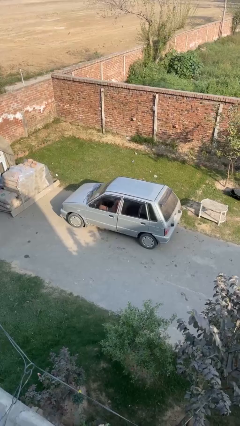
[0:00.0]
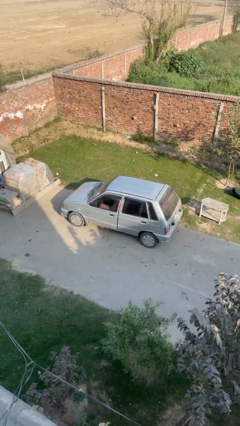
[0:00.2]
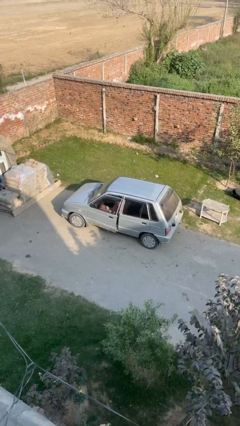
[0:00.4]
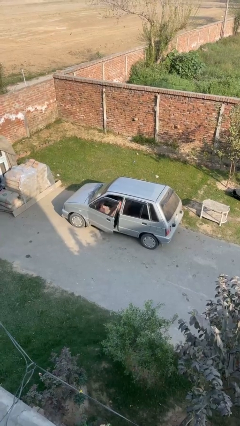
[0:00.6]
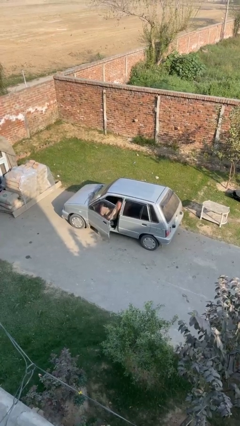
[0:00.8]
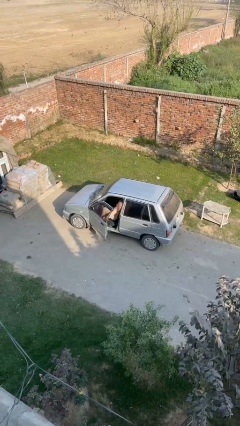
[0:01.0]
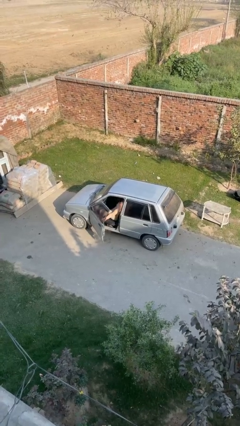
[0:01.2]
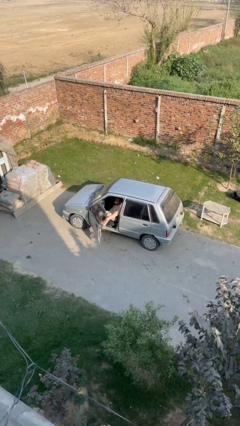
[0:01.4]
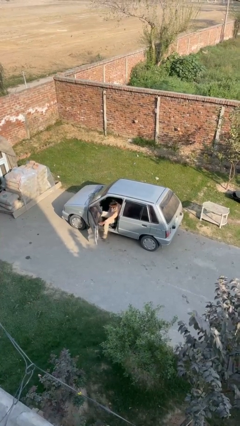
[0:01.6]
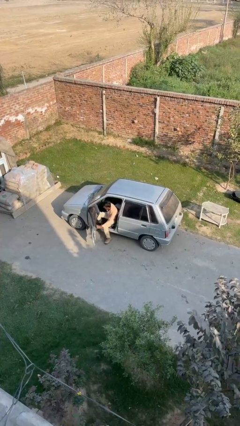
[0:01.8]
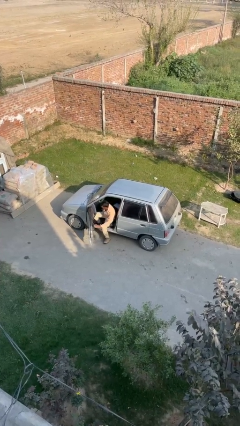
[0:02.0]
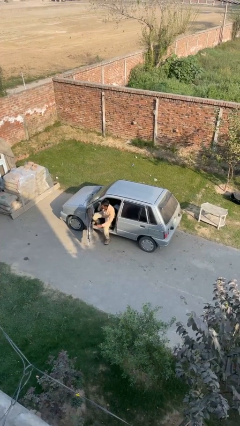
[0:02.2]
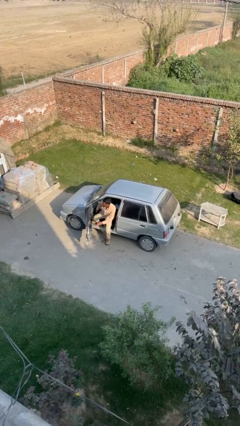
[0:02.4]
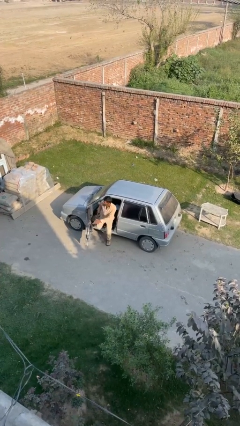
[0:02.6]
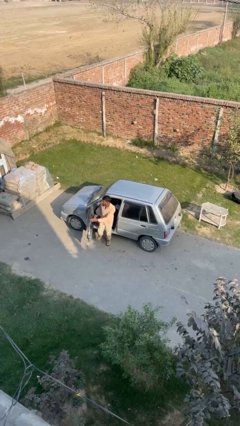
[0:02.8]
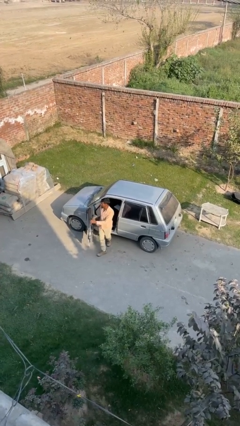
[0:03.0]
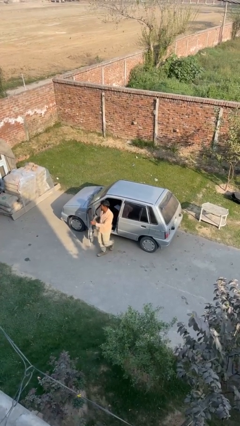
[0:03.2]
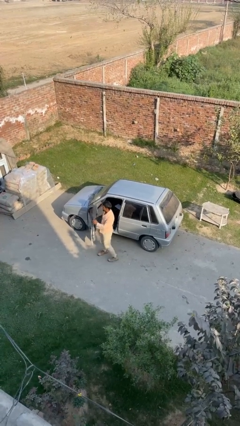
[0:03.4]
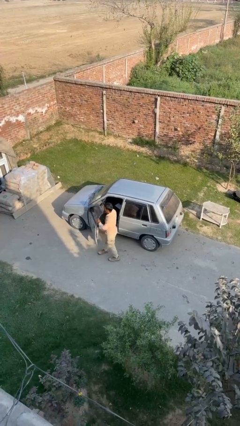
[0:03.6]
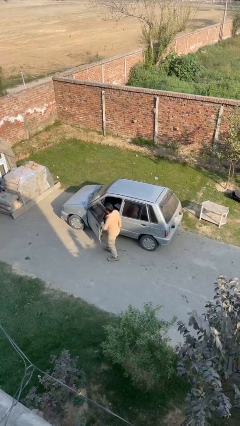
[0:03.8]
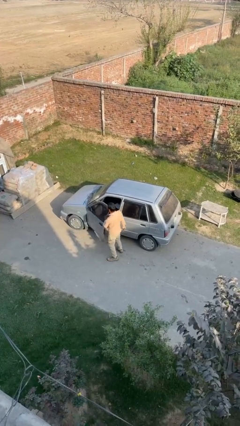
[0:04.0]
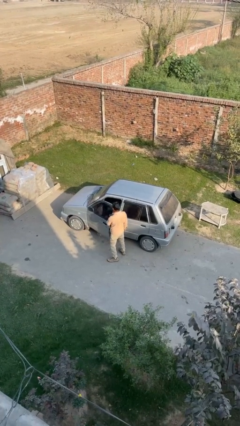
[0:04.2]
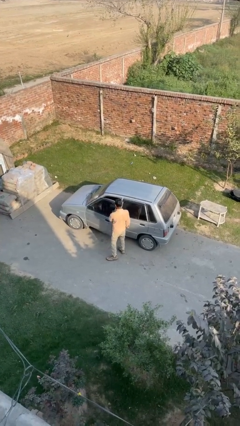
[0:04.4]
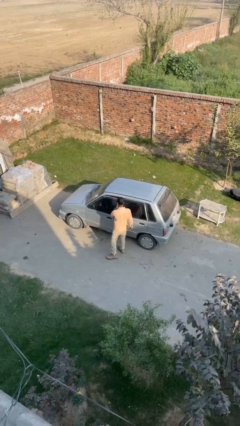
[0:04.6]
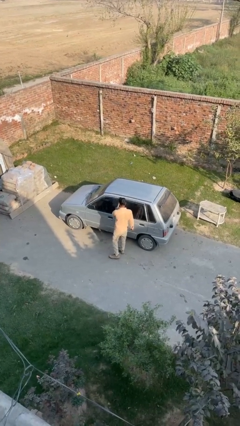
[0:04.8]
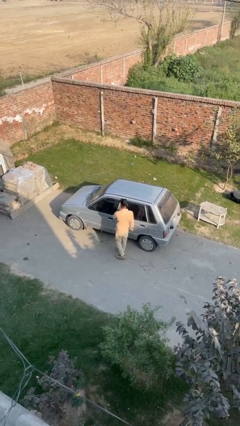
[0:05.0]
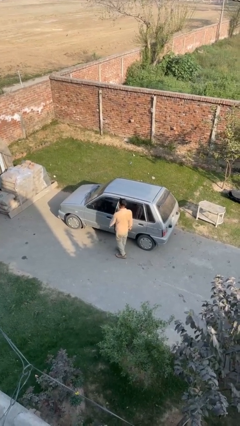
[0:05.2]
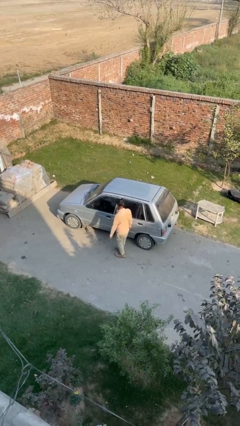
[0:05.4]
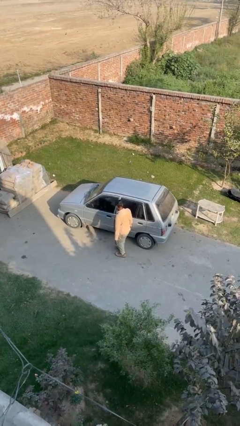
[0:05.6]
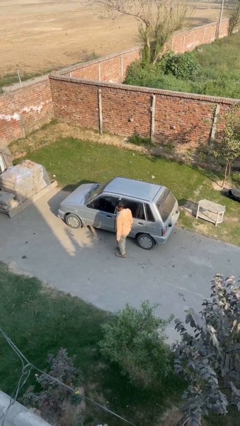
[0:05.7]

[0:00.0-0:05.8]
car drops off person

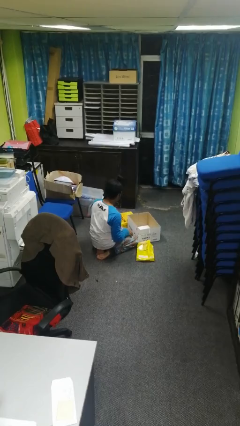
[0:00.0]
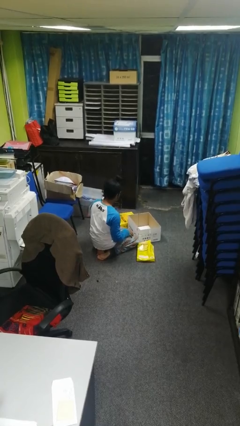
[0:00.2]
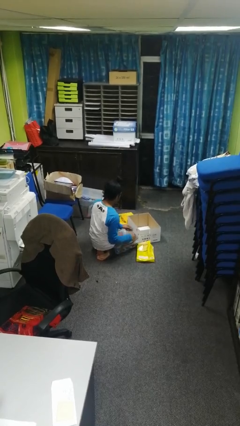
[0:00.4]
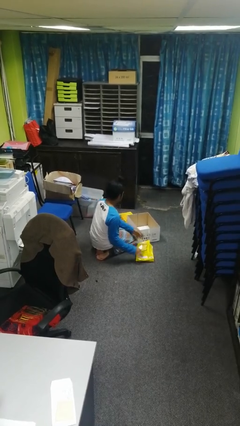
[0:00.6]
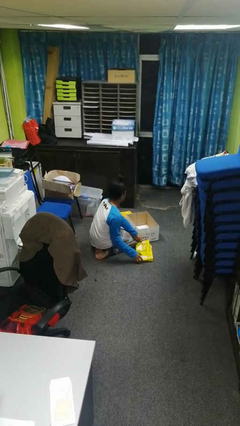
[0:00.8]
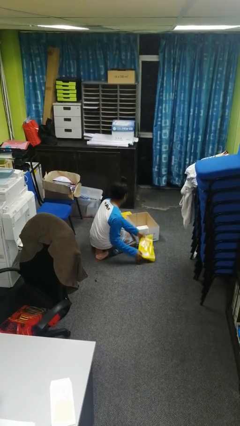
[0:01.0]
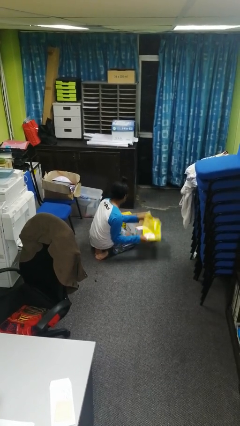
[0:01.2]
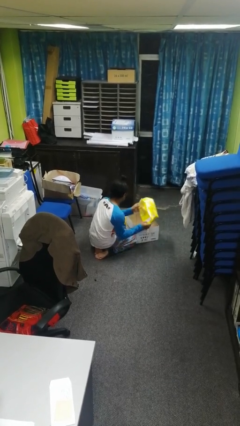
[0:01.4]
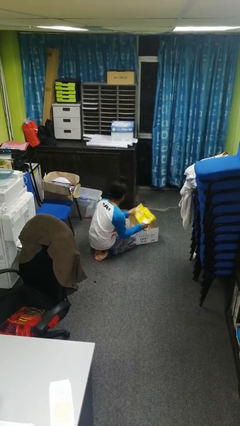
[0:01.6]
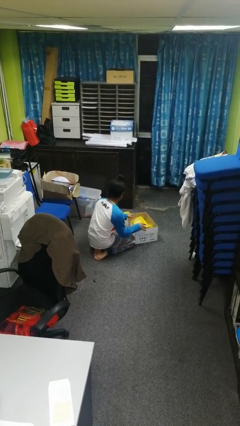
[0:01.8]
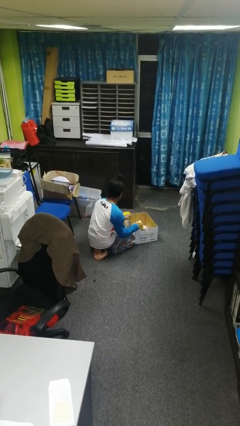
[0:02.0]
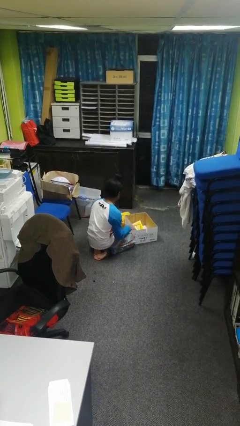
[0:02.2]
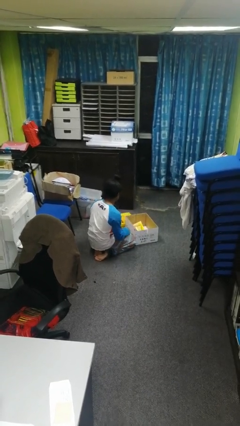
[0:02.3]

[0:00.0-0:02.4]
person puts object into box

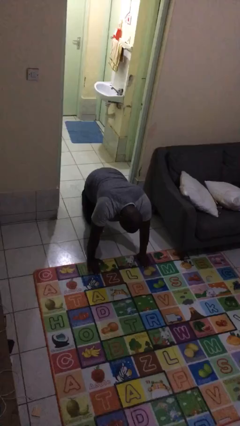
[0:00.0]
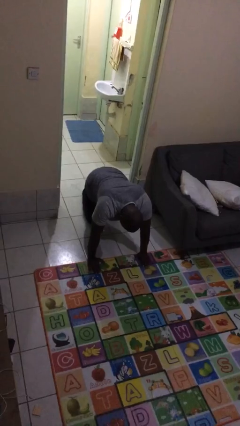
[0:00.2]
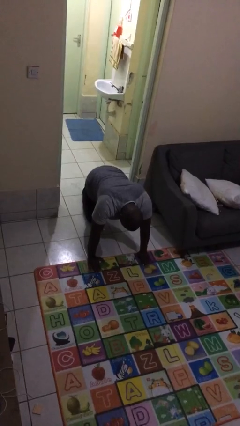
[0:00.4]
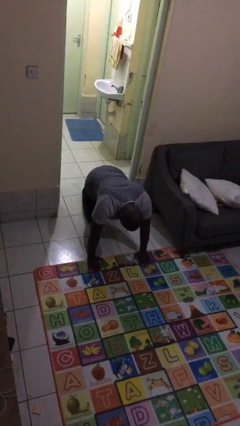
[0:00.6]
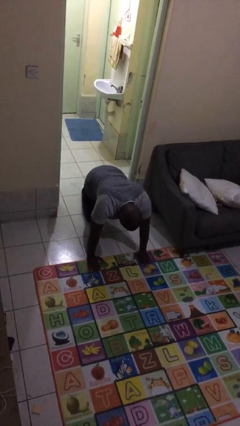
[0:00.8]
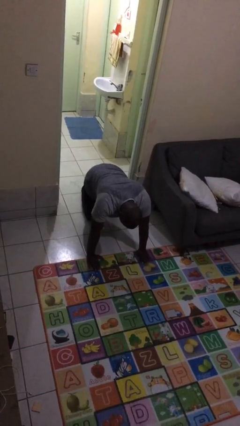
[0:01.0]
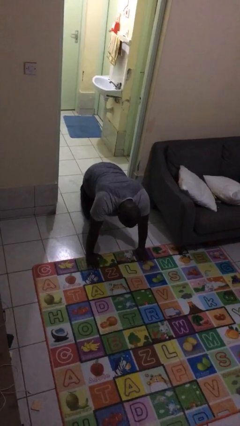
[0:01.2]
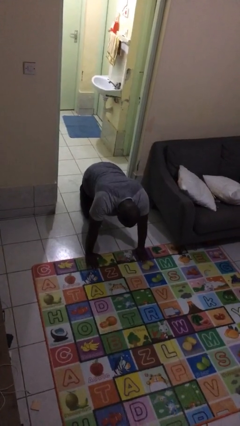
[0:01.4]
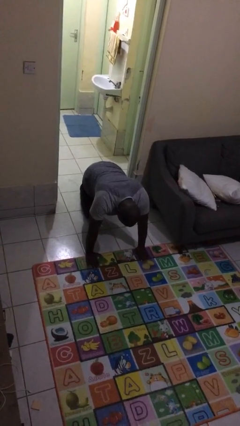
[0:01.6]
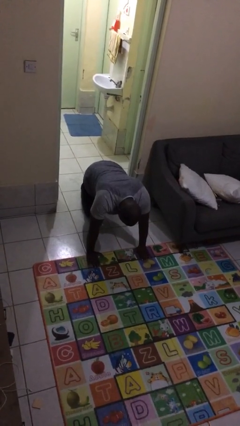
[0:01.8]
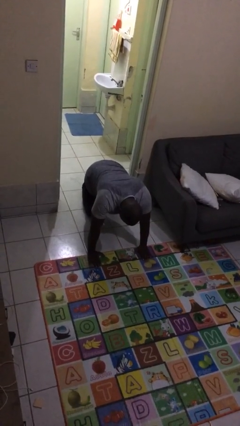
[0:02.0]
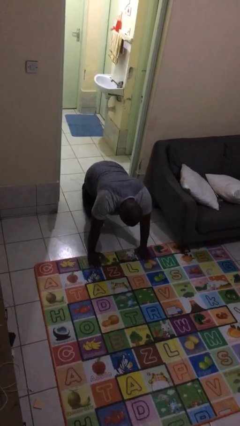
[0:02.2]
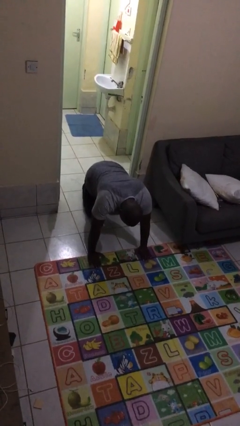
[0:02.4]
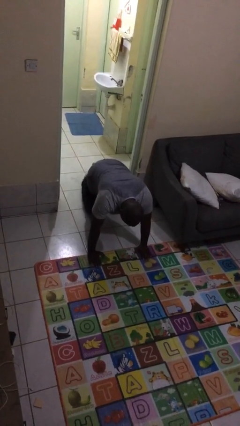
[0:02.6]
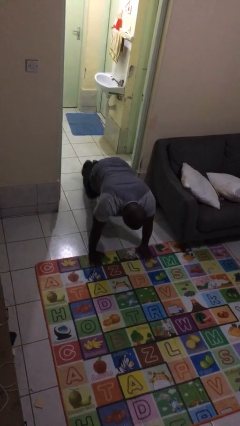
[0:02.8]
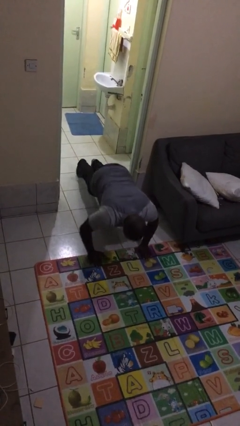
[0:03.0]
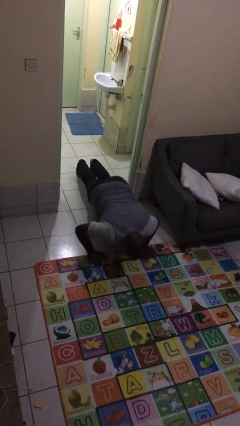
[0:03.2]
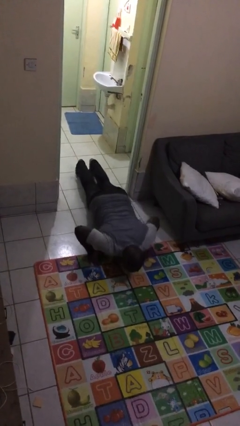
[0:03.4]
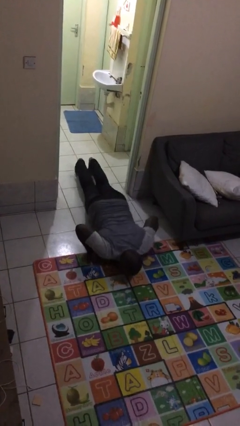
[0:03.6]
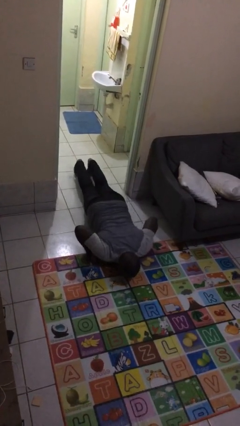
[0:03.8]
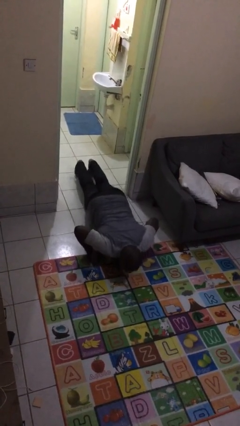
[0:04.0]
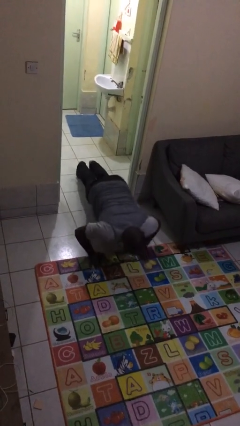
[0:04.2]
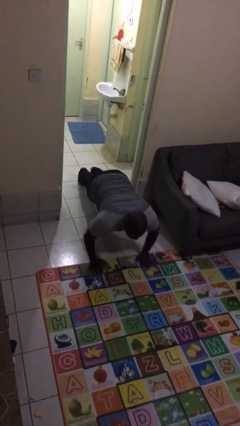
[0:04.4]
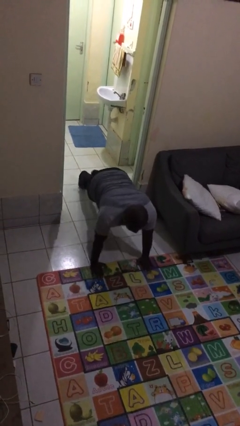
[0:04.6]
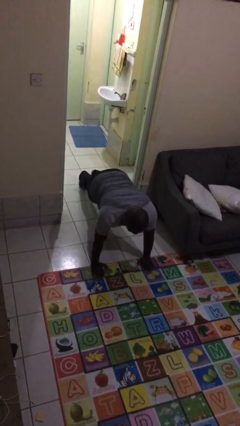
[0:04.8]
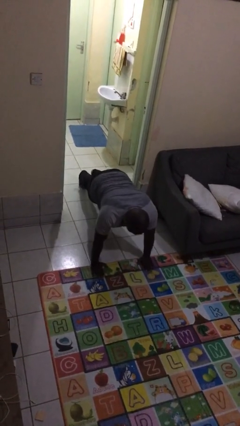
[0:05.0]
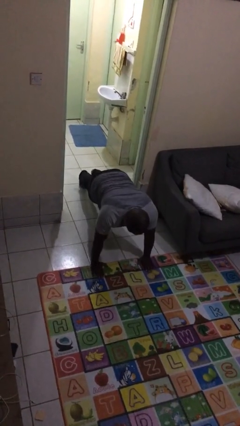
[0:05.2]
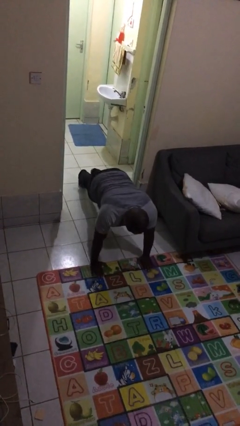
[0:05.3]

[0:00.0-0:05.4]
person exercises with pushup

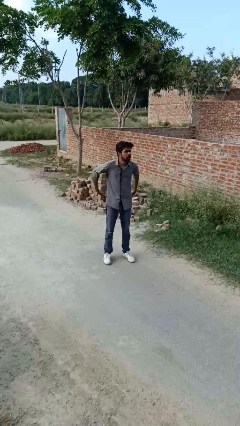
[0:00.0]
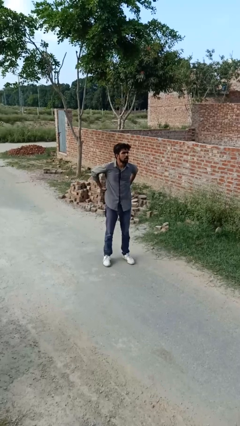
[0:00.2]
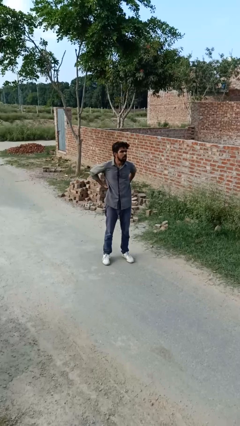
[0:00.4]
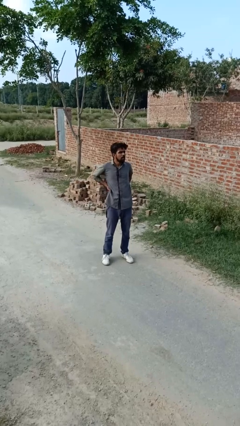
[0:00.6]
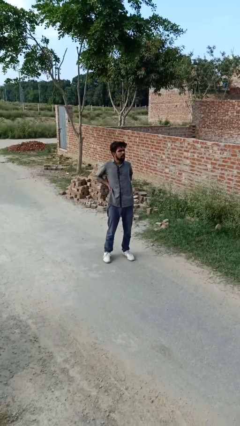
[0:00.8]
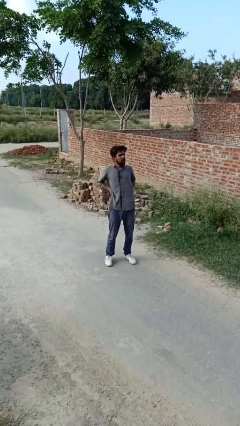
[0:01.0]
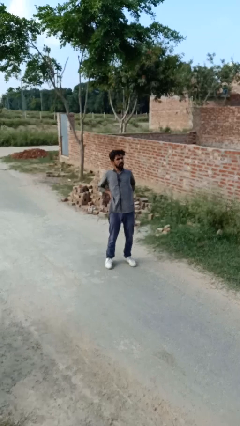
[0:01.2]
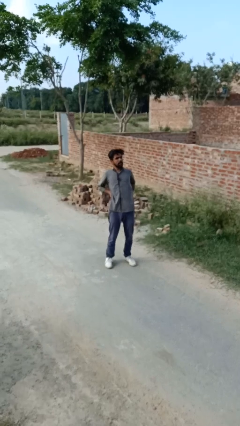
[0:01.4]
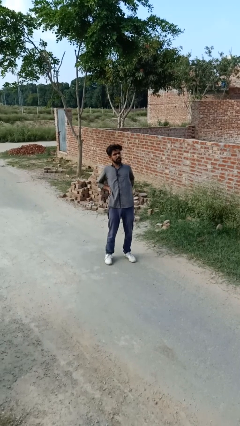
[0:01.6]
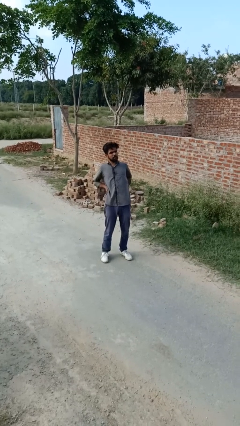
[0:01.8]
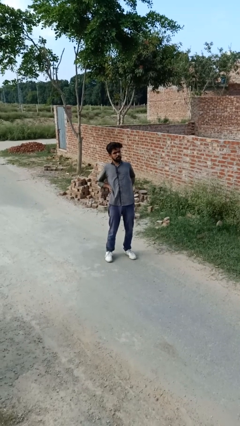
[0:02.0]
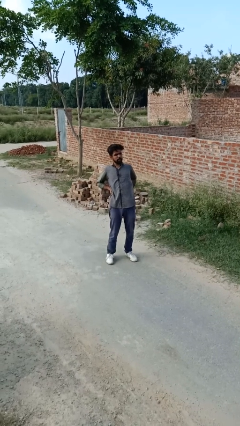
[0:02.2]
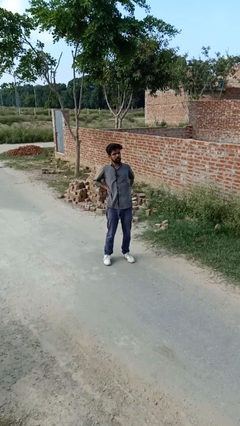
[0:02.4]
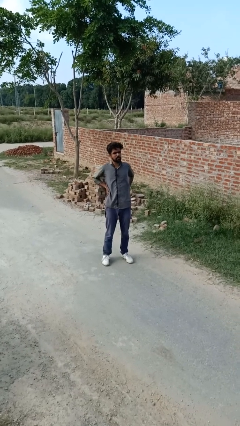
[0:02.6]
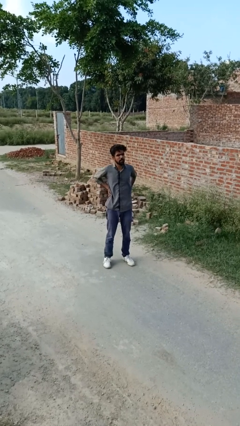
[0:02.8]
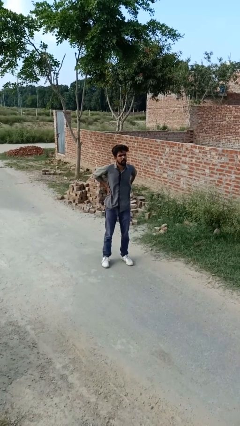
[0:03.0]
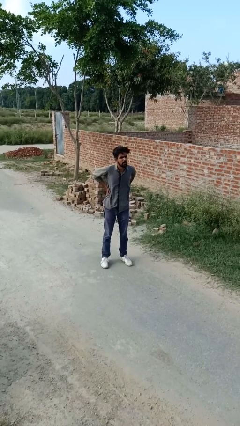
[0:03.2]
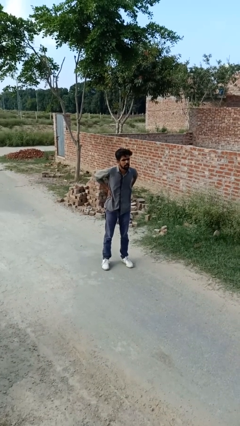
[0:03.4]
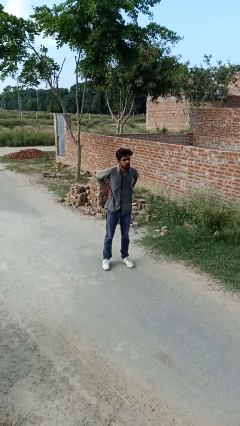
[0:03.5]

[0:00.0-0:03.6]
person stretches back

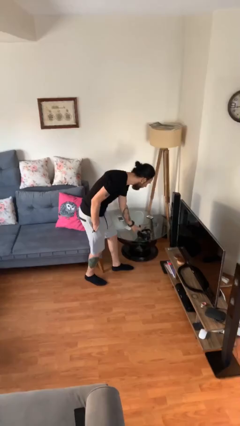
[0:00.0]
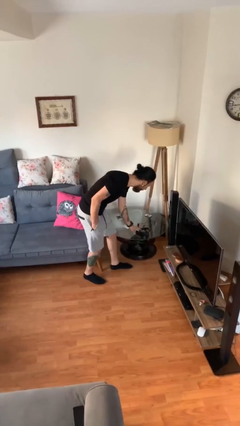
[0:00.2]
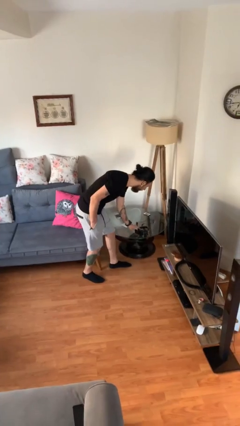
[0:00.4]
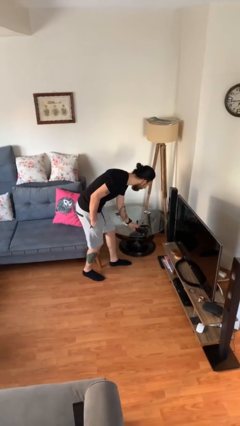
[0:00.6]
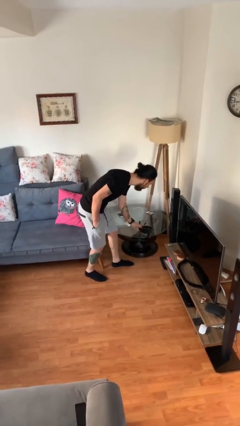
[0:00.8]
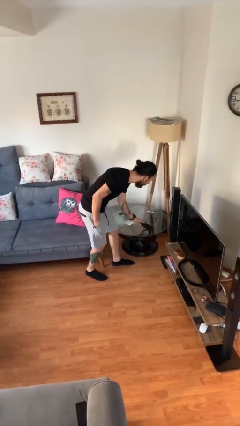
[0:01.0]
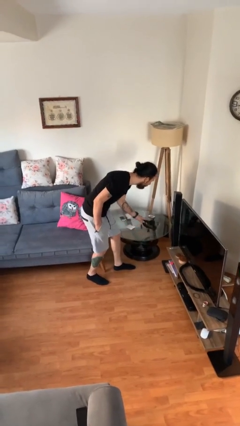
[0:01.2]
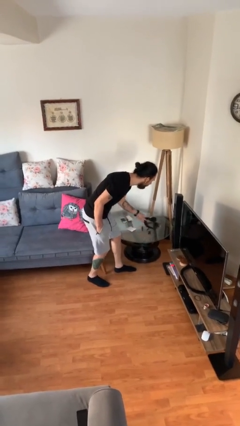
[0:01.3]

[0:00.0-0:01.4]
person picks up object from table
